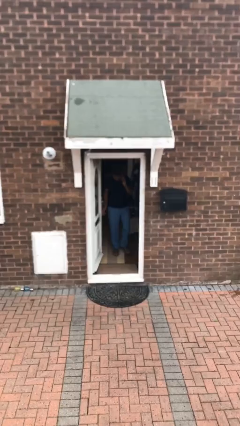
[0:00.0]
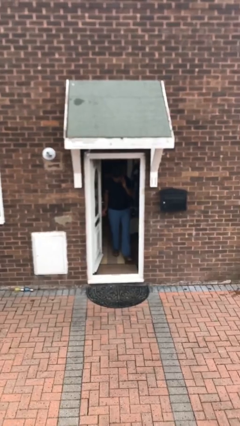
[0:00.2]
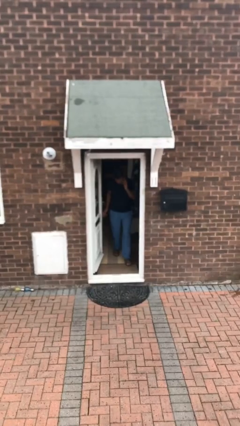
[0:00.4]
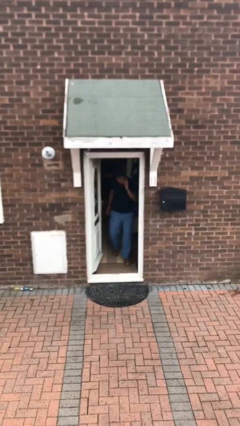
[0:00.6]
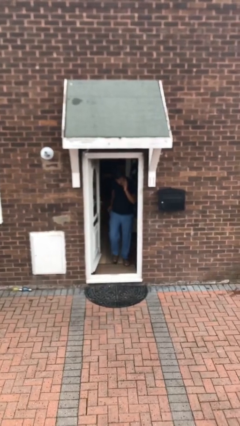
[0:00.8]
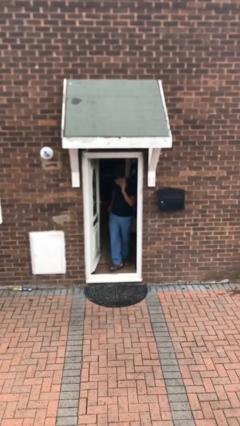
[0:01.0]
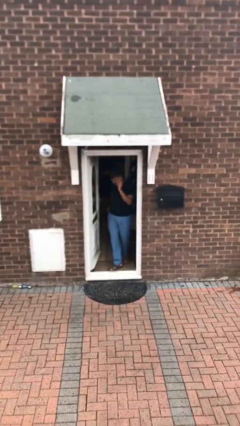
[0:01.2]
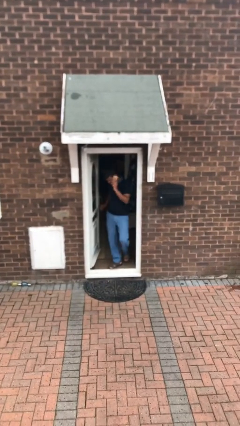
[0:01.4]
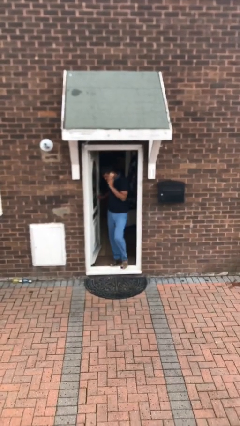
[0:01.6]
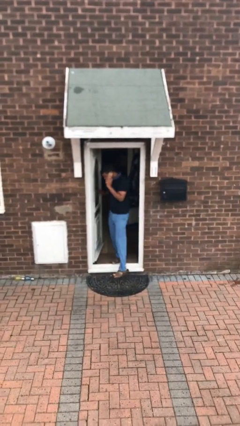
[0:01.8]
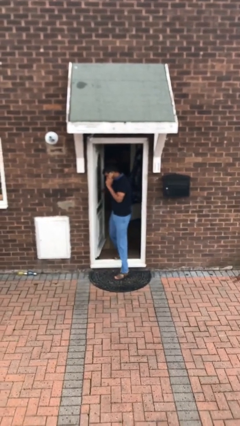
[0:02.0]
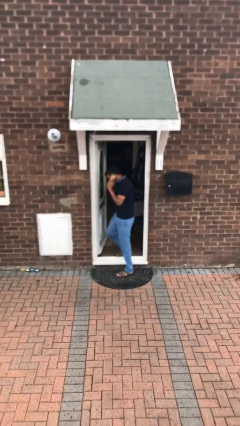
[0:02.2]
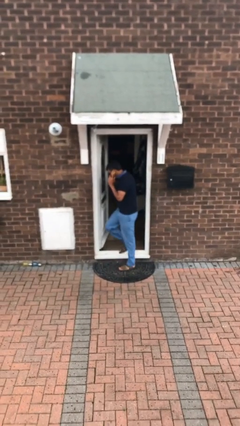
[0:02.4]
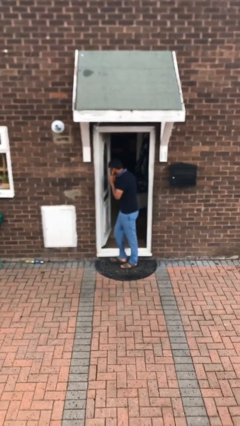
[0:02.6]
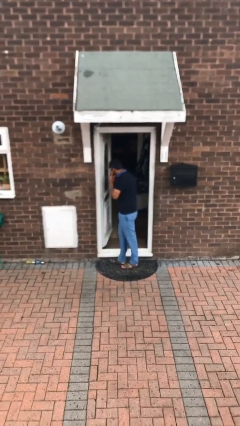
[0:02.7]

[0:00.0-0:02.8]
person enters scene through structure

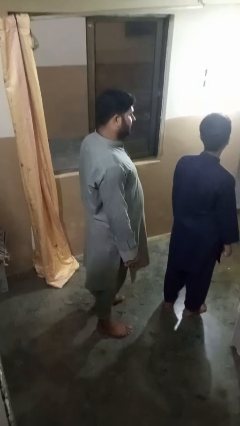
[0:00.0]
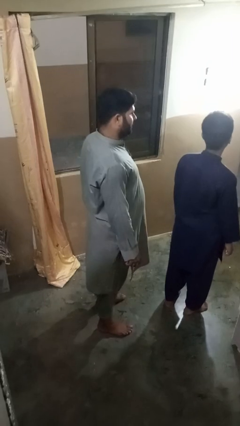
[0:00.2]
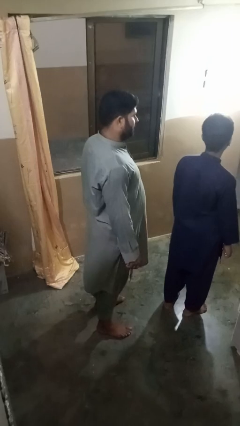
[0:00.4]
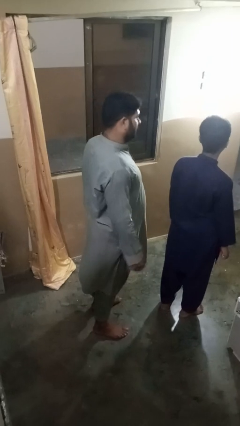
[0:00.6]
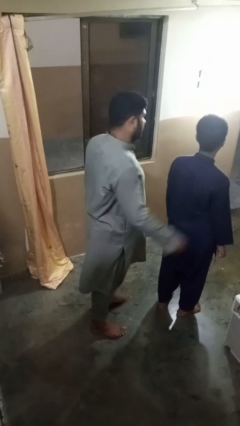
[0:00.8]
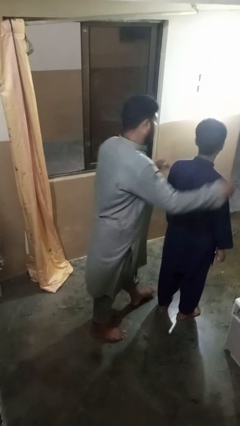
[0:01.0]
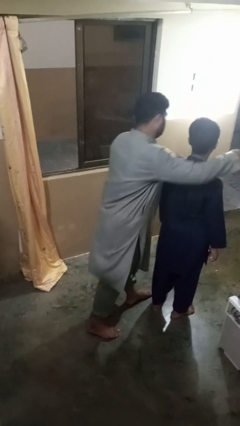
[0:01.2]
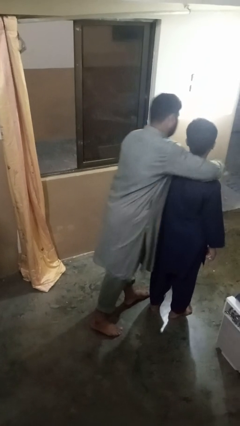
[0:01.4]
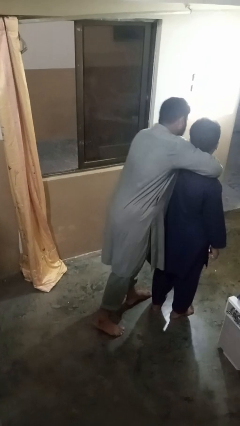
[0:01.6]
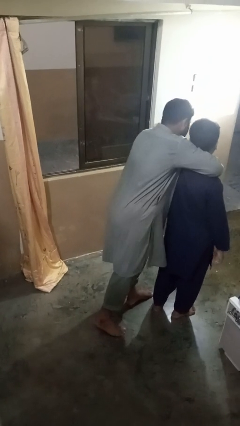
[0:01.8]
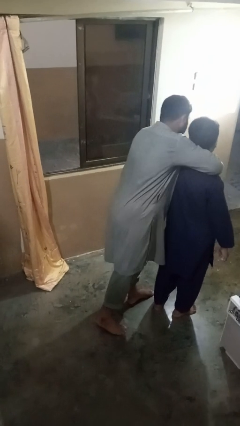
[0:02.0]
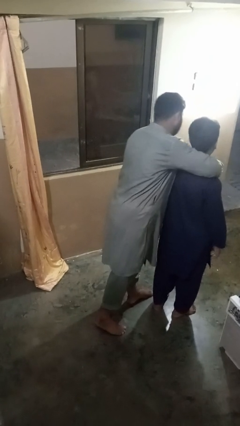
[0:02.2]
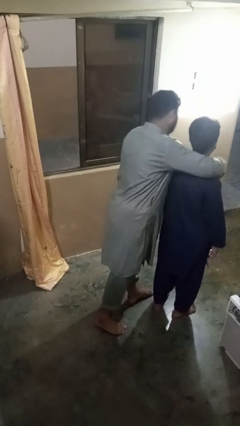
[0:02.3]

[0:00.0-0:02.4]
person hugs person from behind

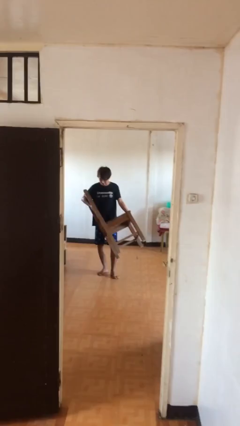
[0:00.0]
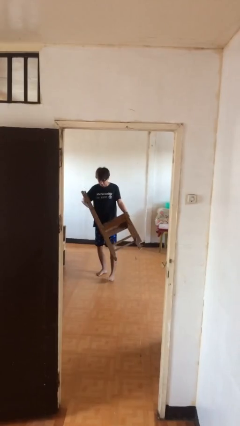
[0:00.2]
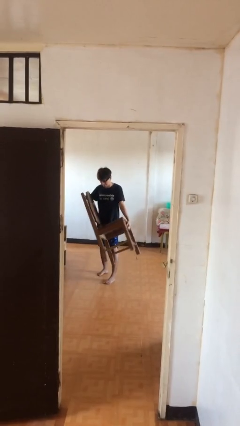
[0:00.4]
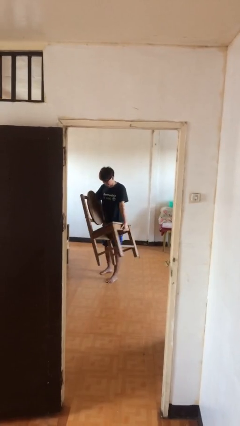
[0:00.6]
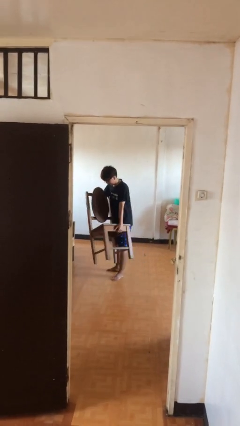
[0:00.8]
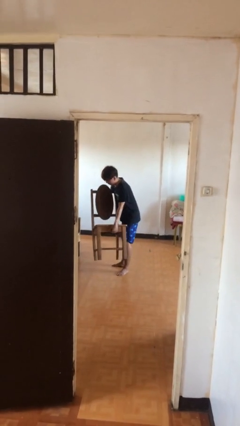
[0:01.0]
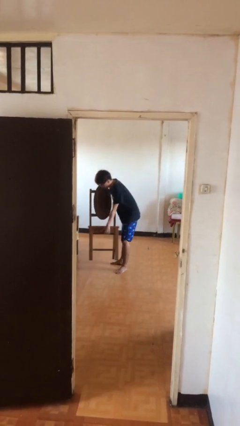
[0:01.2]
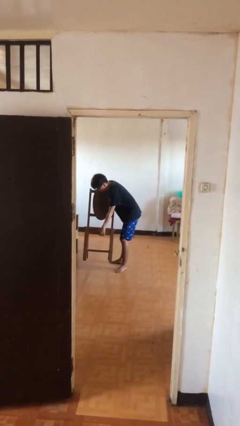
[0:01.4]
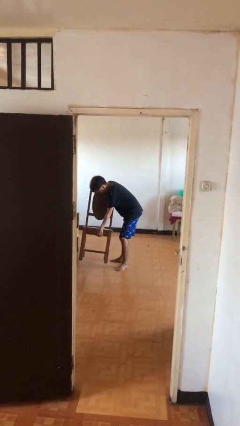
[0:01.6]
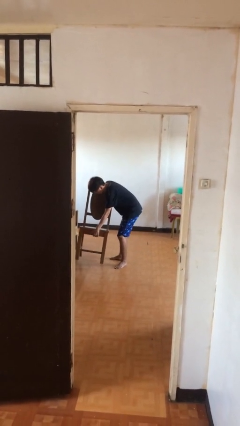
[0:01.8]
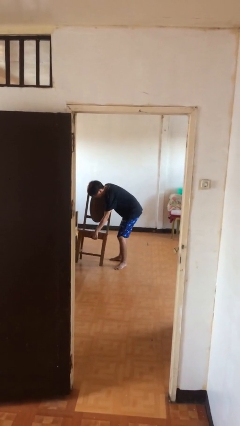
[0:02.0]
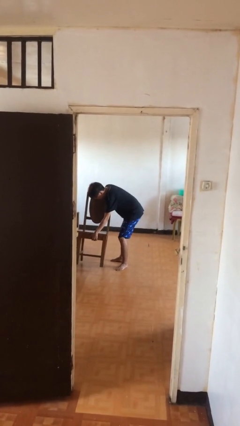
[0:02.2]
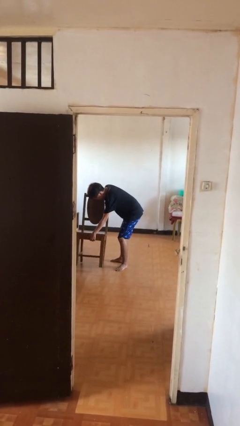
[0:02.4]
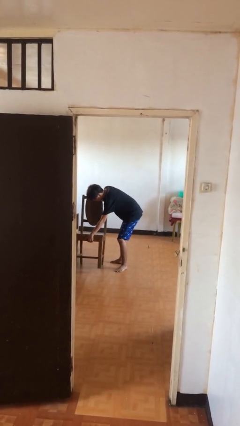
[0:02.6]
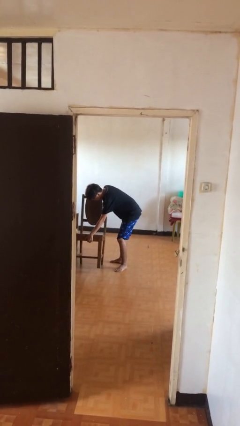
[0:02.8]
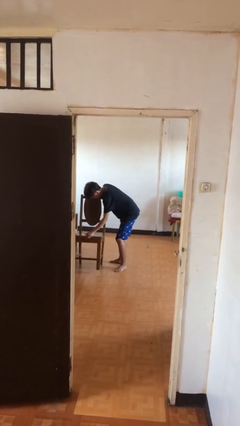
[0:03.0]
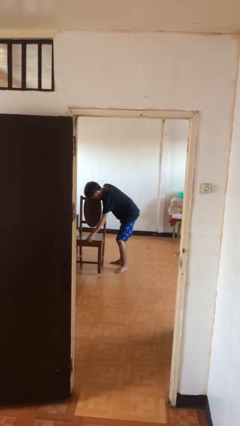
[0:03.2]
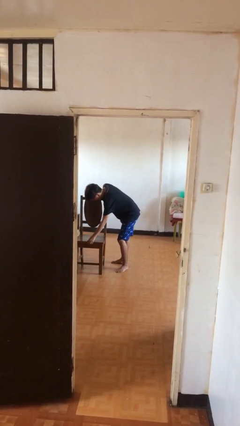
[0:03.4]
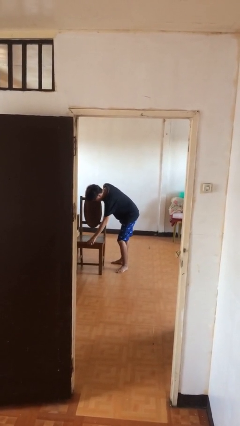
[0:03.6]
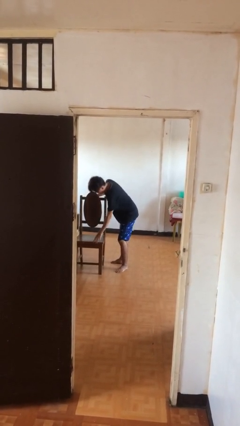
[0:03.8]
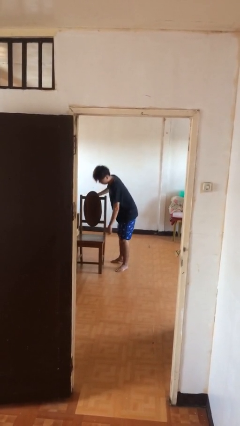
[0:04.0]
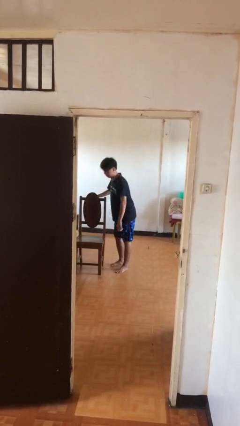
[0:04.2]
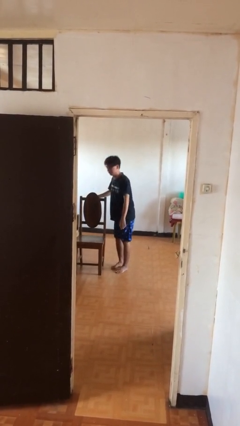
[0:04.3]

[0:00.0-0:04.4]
person puts down object on floor

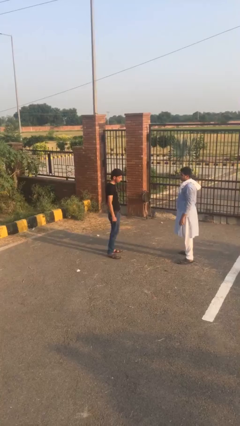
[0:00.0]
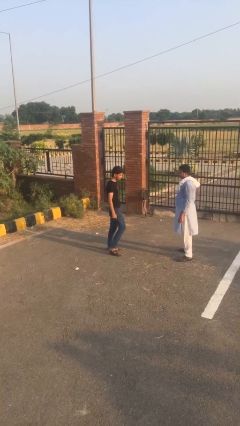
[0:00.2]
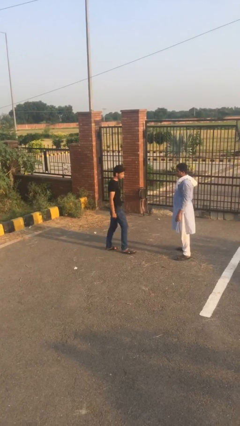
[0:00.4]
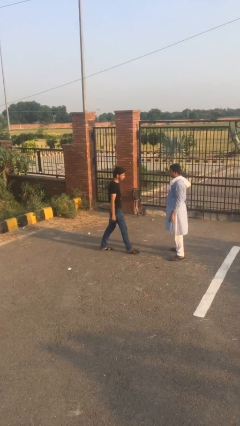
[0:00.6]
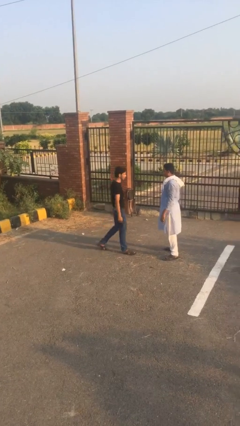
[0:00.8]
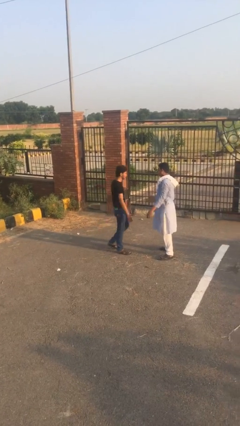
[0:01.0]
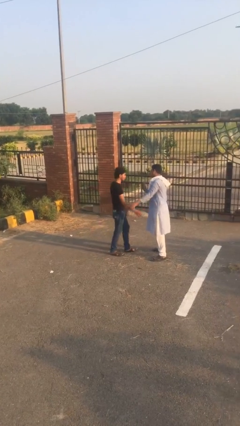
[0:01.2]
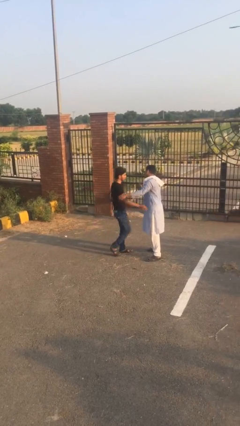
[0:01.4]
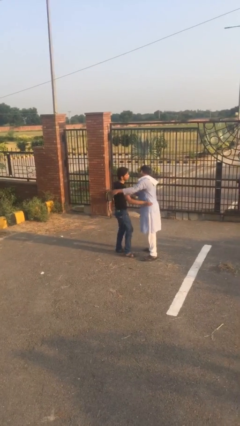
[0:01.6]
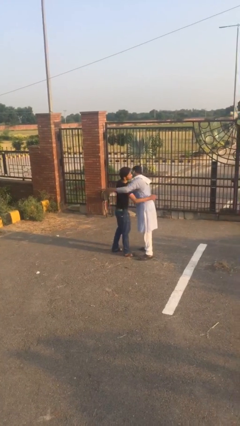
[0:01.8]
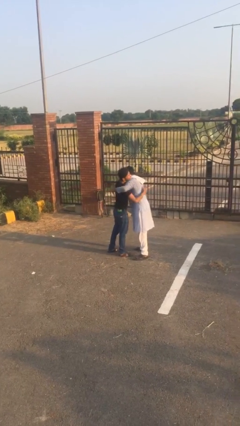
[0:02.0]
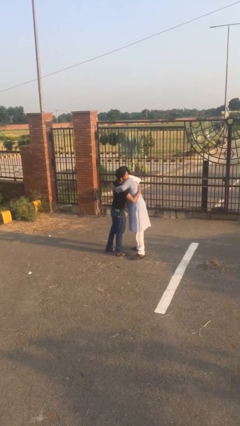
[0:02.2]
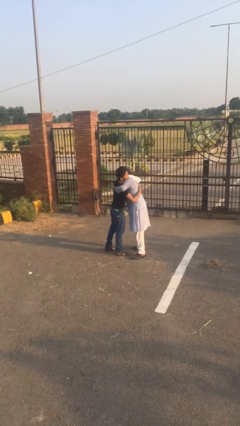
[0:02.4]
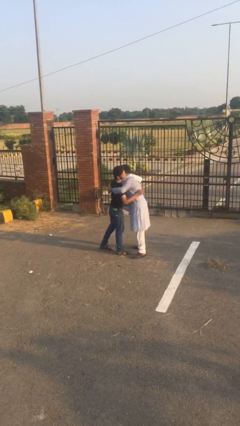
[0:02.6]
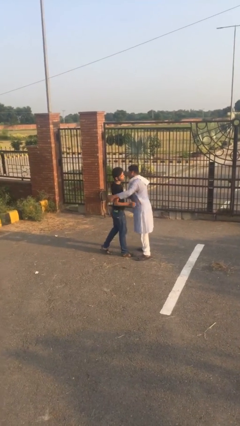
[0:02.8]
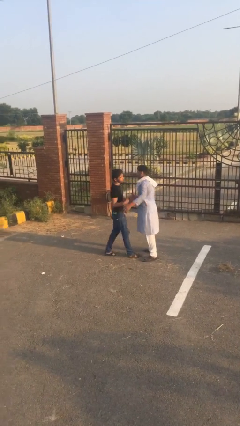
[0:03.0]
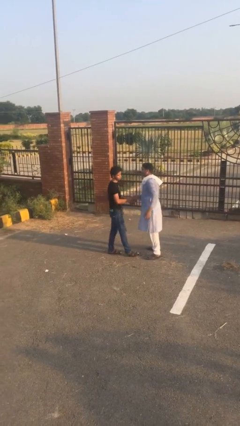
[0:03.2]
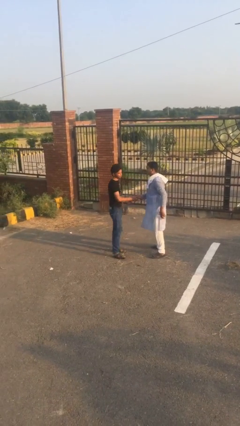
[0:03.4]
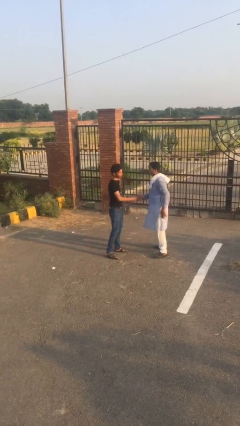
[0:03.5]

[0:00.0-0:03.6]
person embraces person

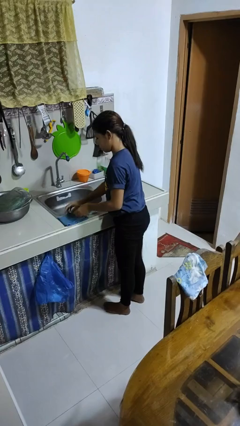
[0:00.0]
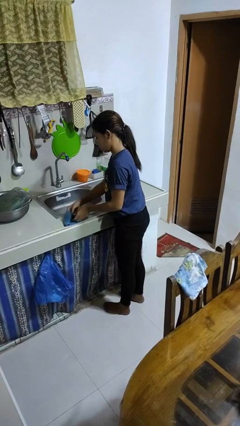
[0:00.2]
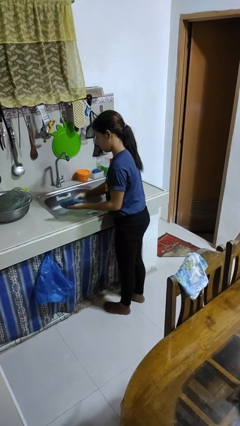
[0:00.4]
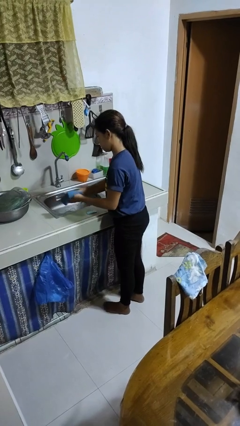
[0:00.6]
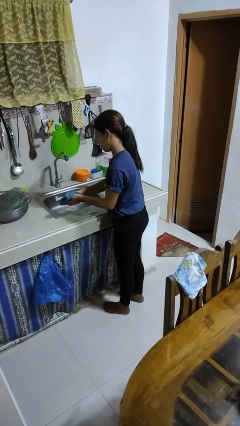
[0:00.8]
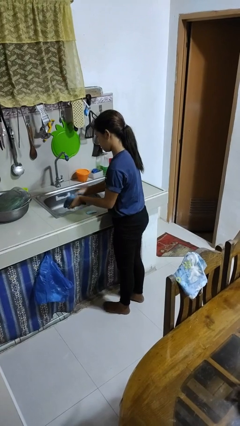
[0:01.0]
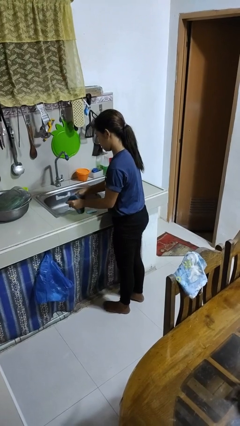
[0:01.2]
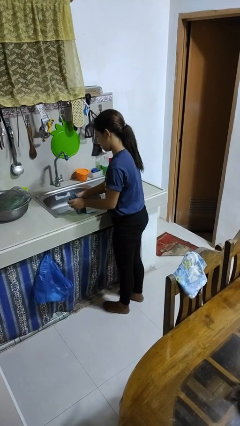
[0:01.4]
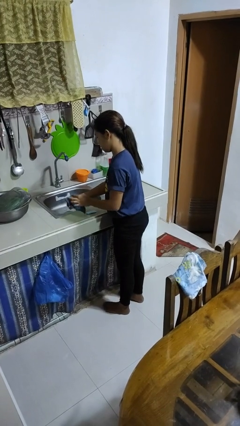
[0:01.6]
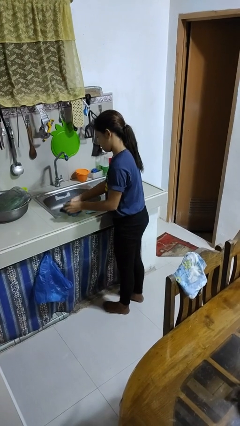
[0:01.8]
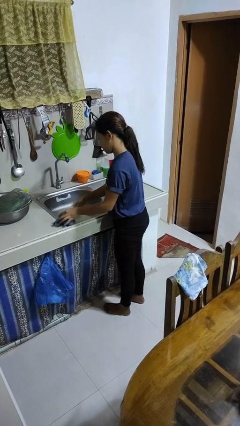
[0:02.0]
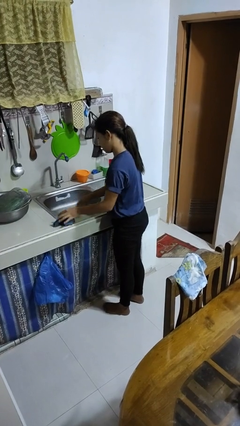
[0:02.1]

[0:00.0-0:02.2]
person dries hands with towel

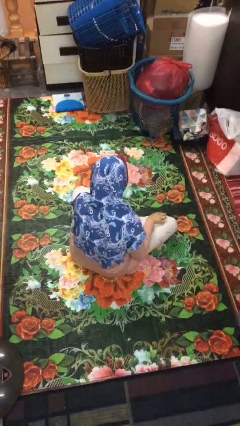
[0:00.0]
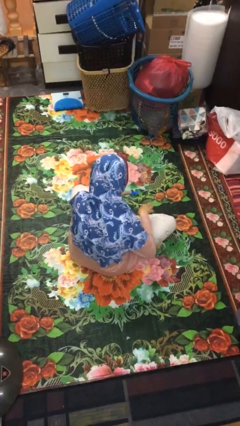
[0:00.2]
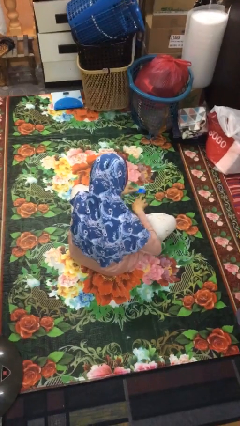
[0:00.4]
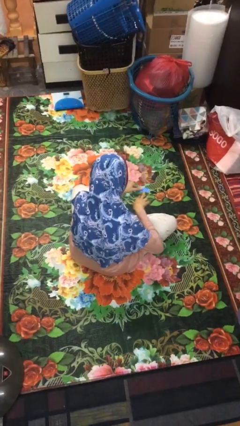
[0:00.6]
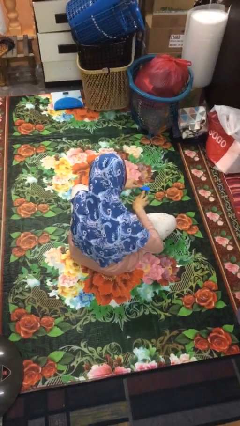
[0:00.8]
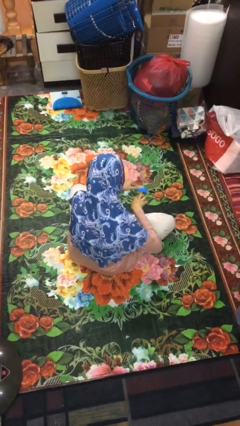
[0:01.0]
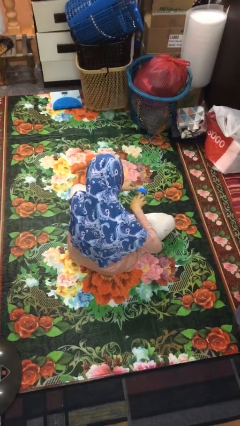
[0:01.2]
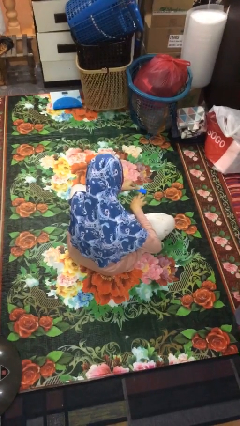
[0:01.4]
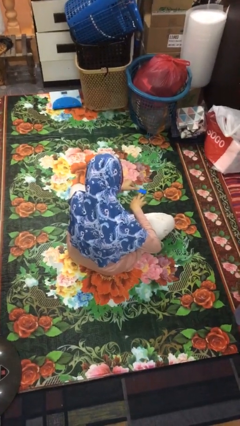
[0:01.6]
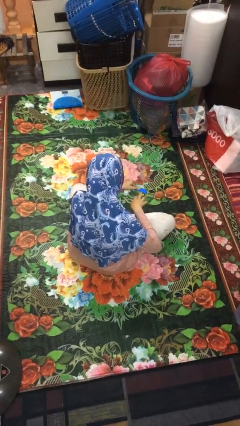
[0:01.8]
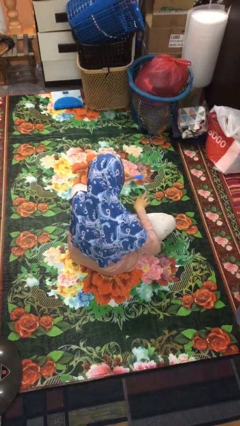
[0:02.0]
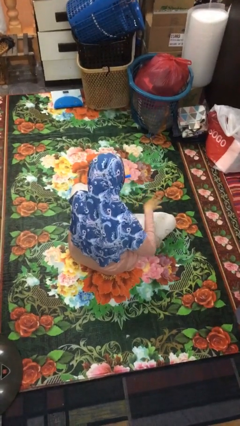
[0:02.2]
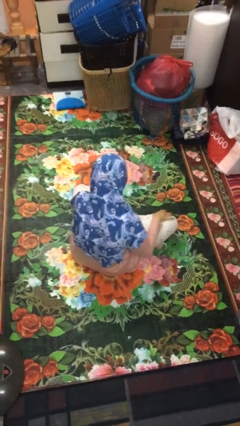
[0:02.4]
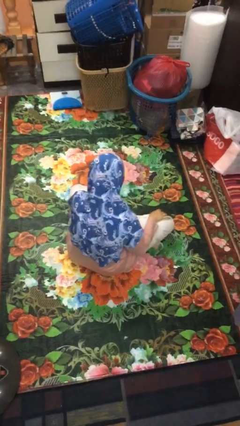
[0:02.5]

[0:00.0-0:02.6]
person files fingernails
